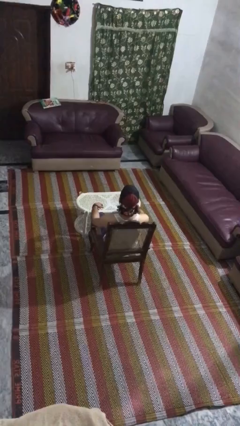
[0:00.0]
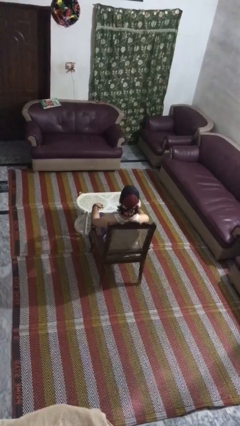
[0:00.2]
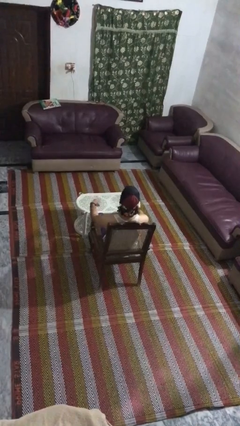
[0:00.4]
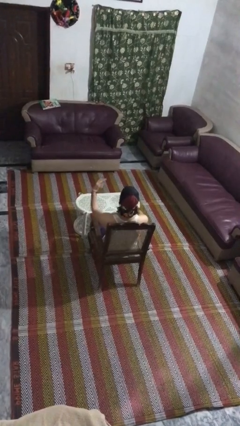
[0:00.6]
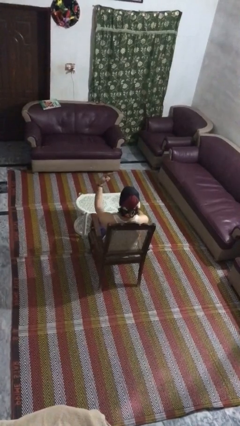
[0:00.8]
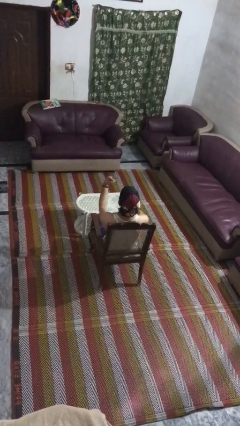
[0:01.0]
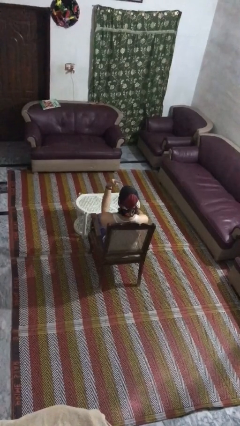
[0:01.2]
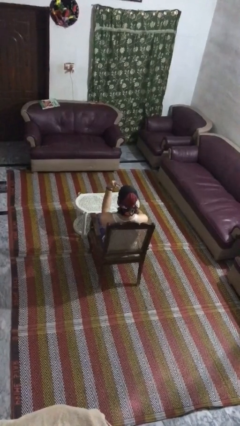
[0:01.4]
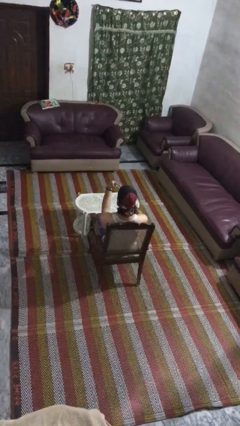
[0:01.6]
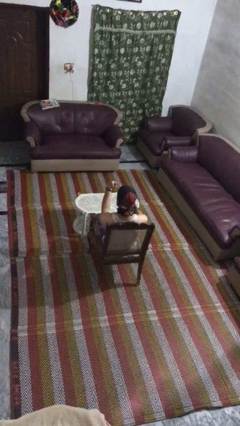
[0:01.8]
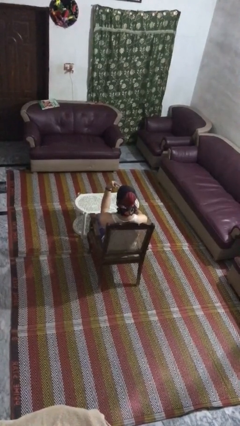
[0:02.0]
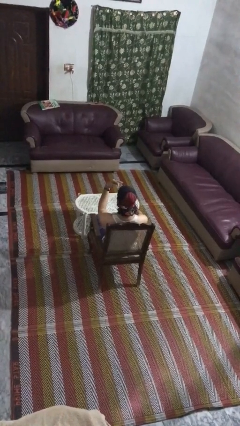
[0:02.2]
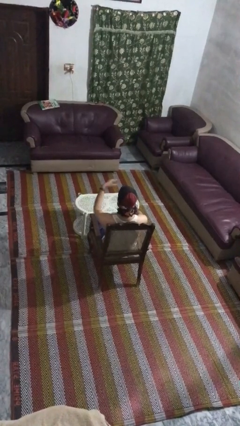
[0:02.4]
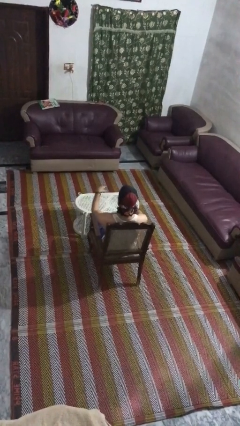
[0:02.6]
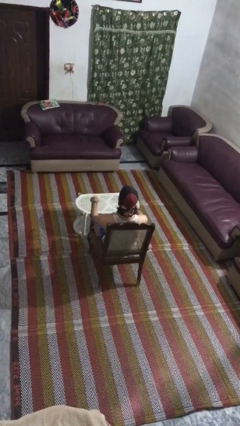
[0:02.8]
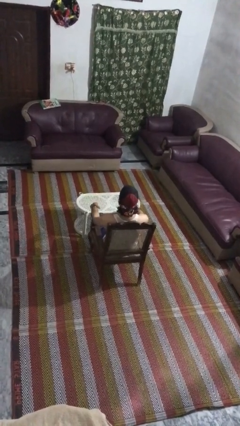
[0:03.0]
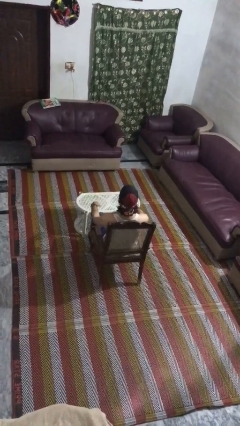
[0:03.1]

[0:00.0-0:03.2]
person gestures watch closely

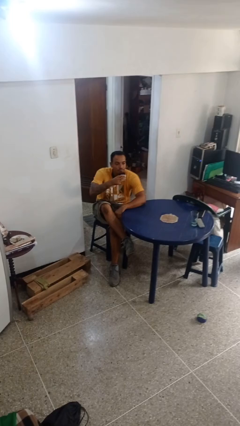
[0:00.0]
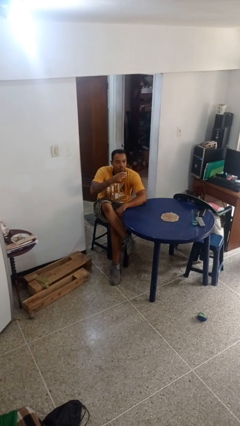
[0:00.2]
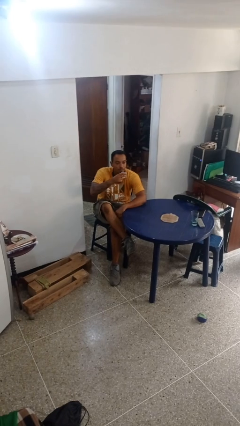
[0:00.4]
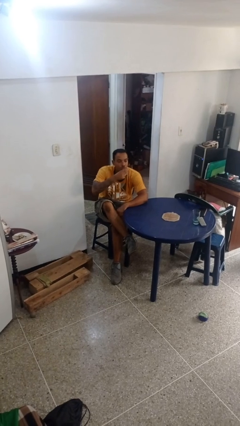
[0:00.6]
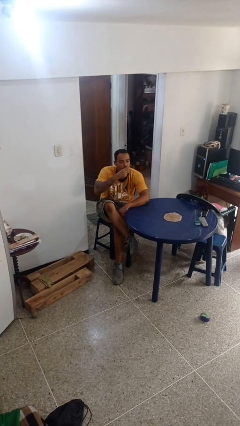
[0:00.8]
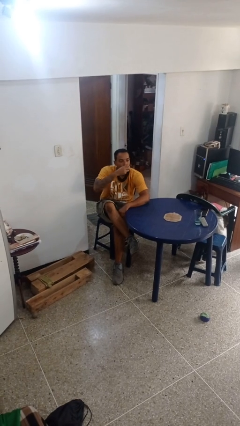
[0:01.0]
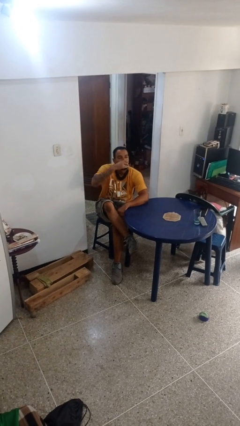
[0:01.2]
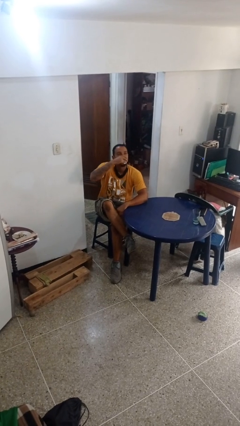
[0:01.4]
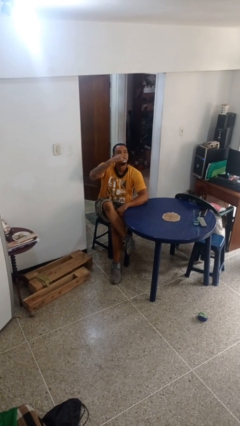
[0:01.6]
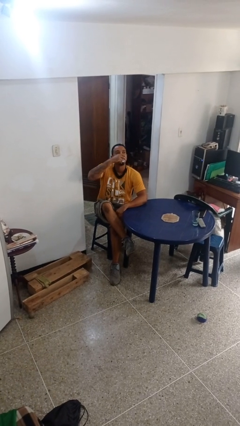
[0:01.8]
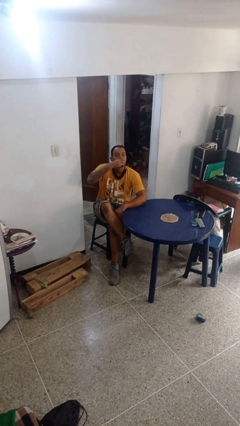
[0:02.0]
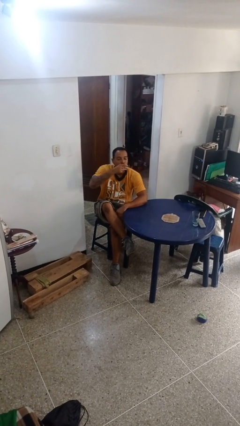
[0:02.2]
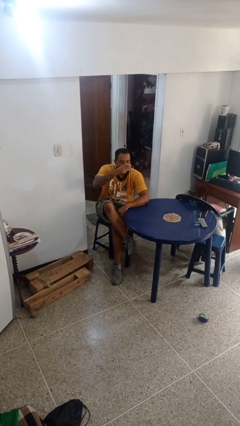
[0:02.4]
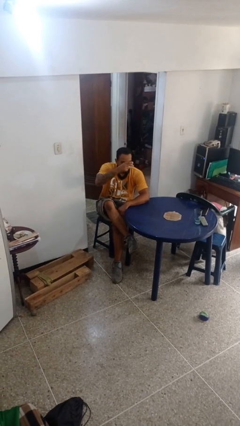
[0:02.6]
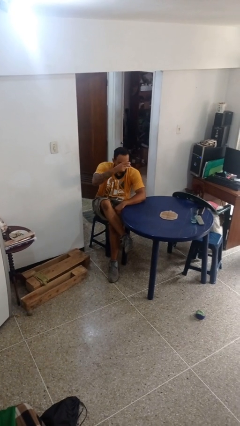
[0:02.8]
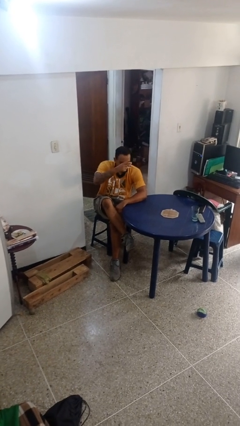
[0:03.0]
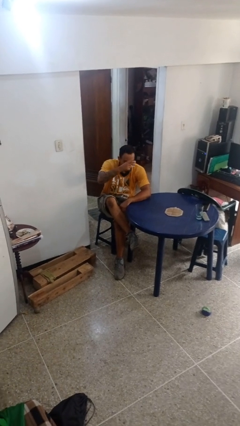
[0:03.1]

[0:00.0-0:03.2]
person drinks from shotglass

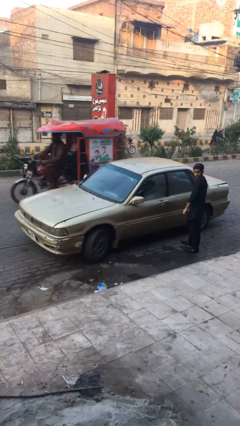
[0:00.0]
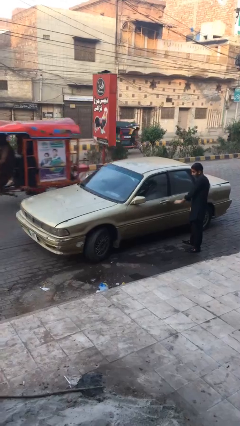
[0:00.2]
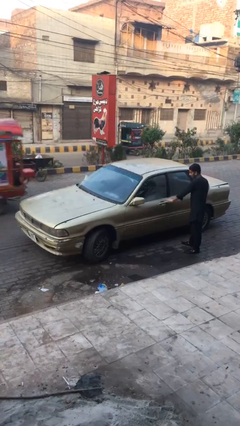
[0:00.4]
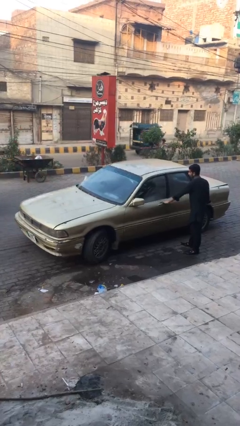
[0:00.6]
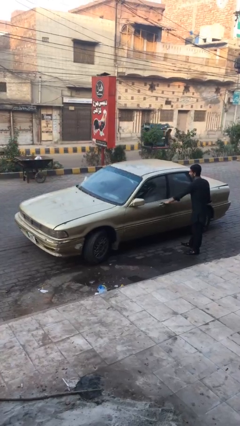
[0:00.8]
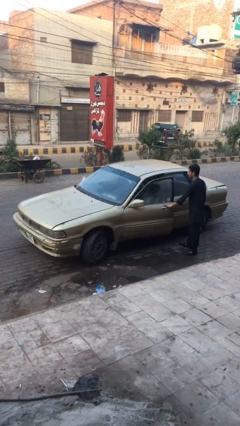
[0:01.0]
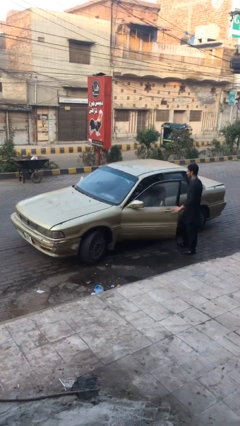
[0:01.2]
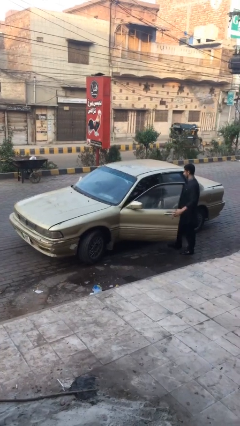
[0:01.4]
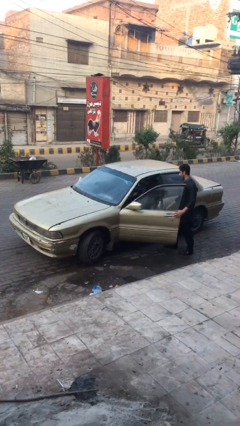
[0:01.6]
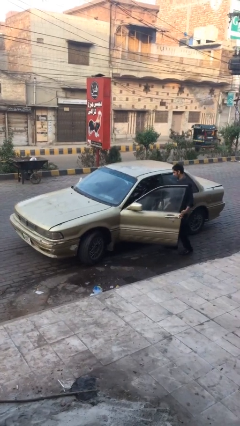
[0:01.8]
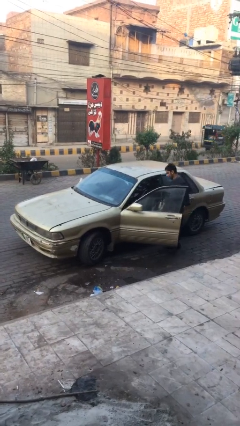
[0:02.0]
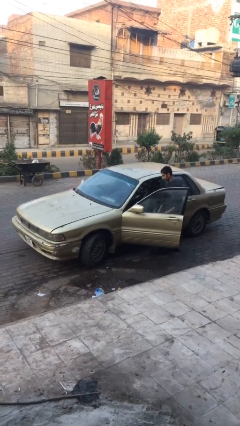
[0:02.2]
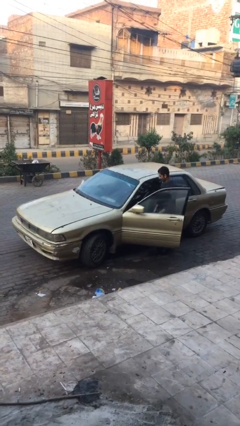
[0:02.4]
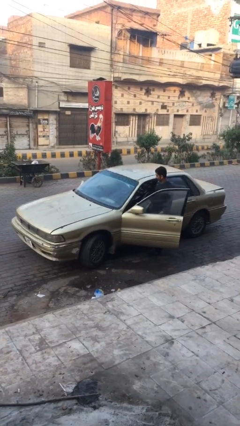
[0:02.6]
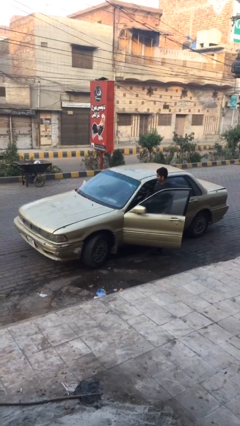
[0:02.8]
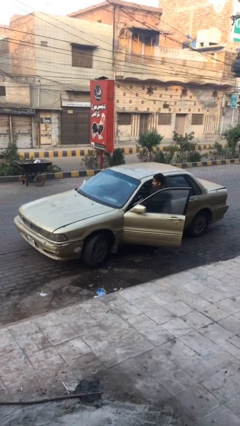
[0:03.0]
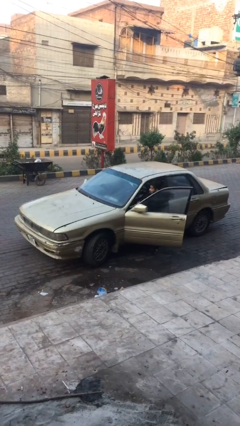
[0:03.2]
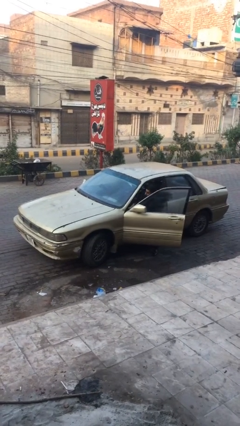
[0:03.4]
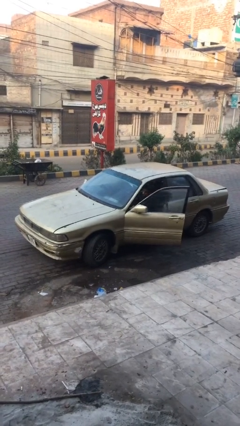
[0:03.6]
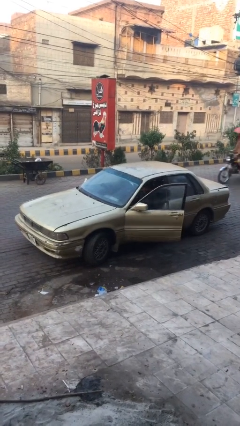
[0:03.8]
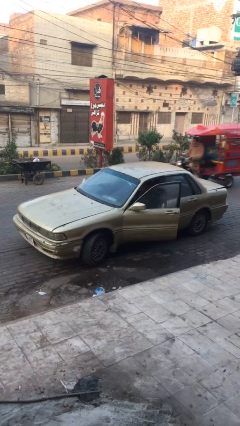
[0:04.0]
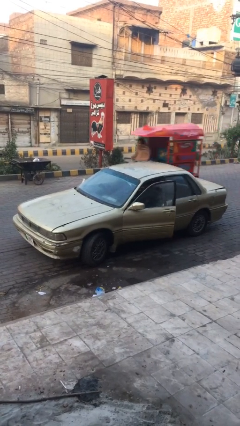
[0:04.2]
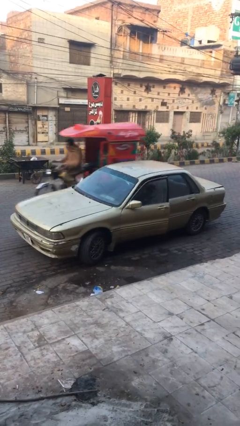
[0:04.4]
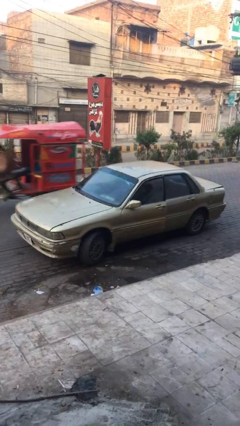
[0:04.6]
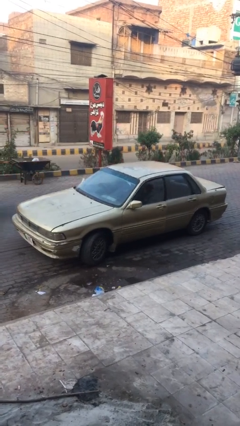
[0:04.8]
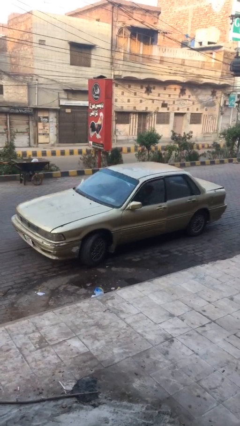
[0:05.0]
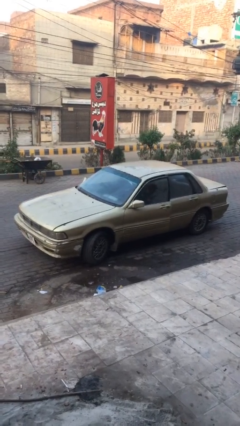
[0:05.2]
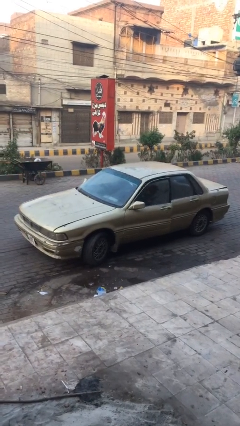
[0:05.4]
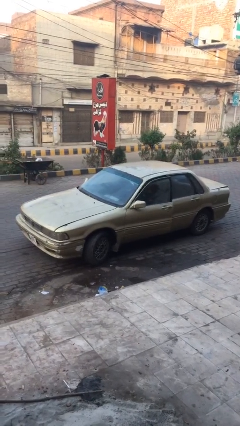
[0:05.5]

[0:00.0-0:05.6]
car picks up person

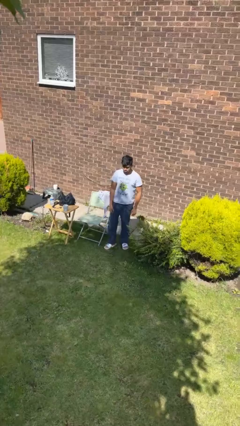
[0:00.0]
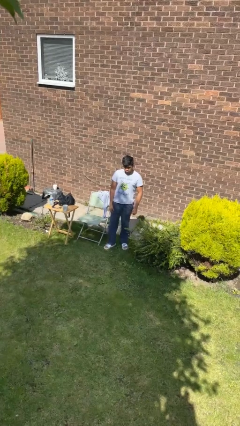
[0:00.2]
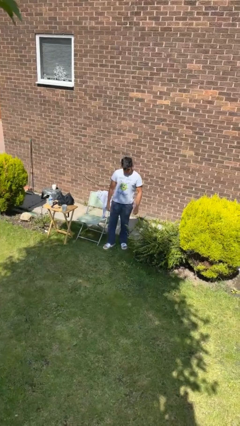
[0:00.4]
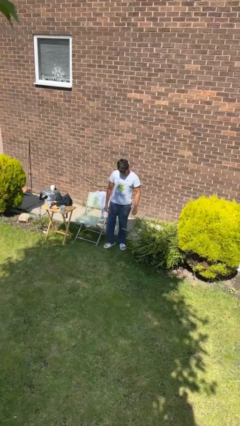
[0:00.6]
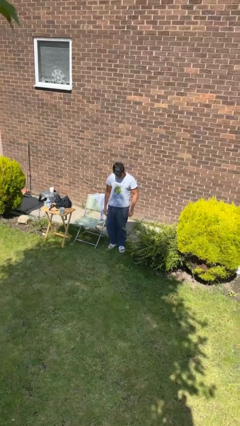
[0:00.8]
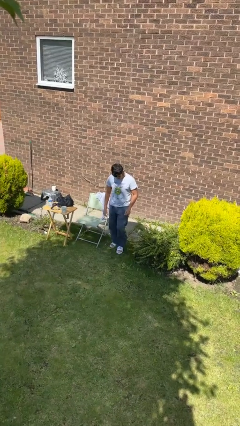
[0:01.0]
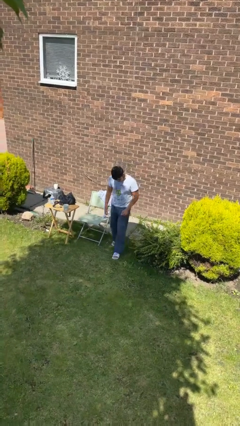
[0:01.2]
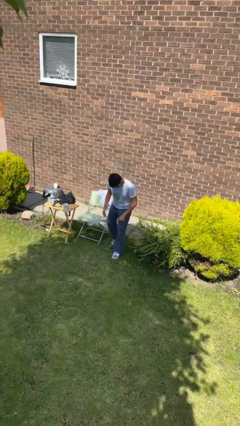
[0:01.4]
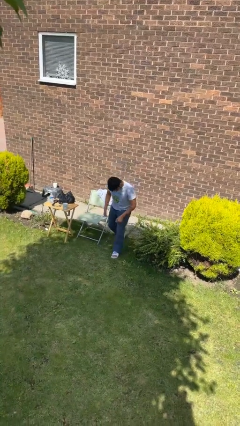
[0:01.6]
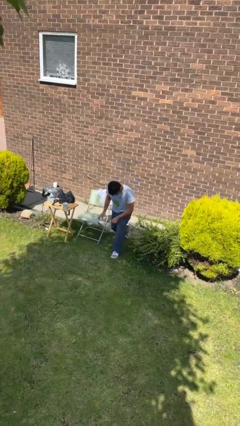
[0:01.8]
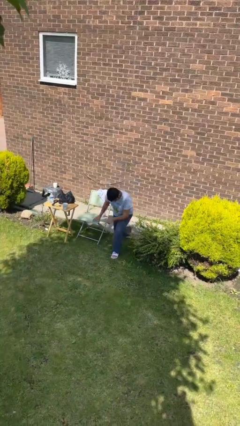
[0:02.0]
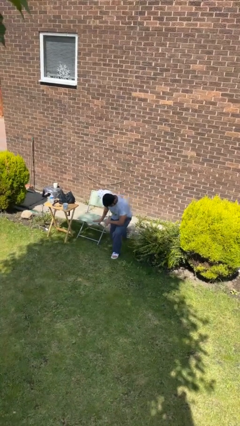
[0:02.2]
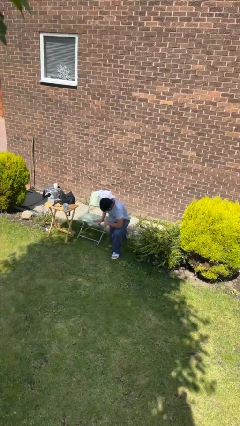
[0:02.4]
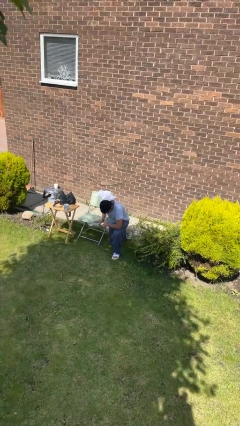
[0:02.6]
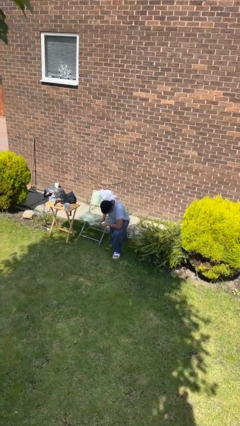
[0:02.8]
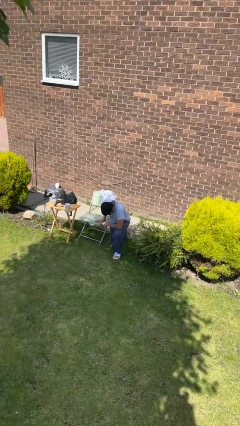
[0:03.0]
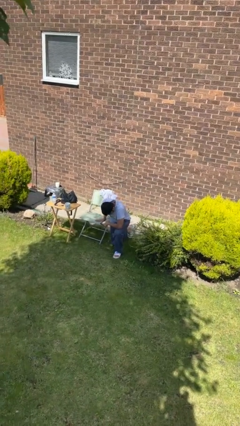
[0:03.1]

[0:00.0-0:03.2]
person kneels

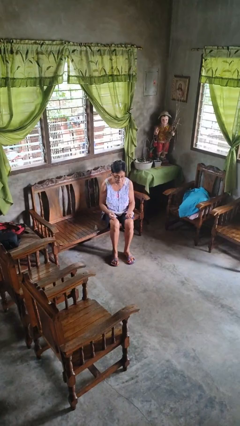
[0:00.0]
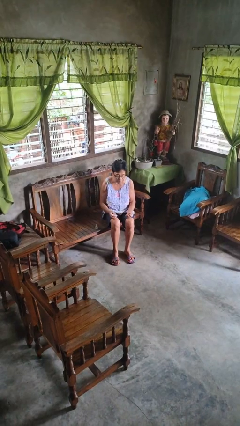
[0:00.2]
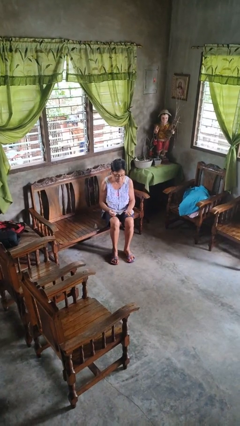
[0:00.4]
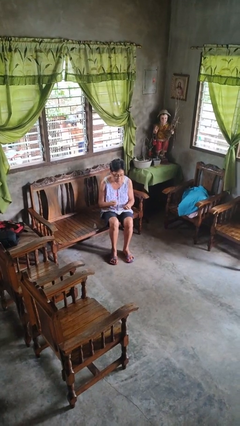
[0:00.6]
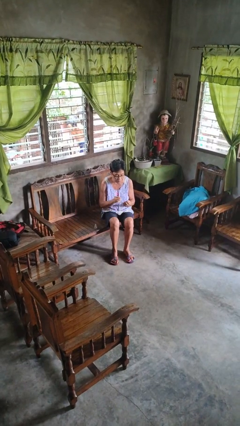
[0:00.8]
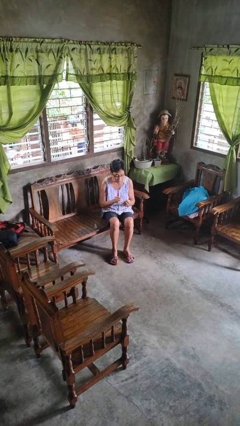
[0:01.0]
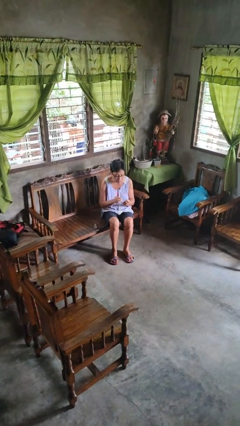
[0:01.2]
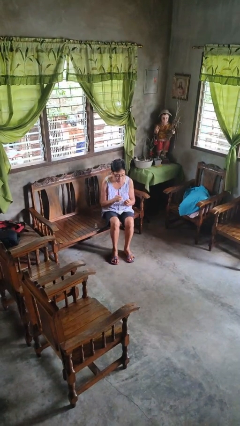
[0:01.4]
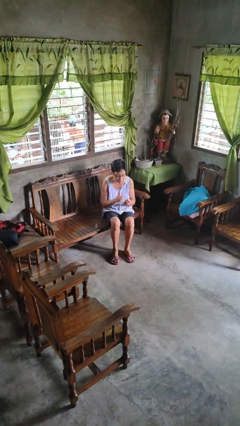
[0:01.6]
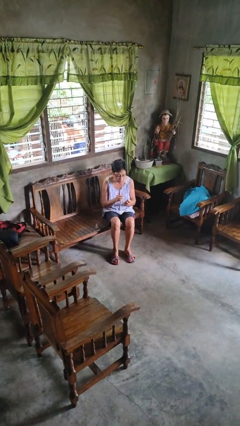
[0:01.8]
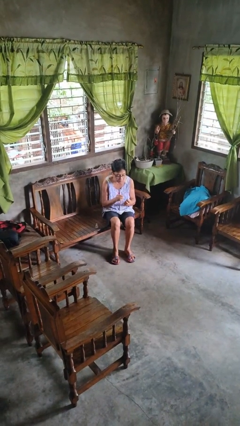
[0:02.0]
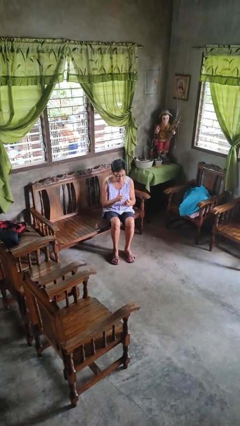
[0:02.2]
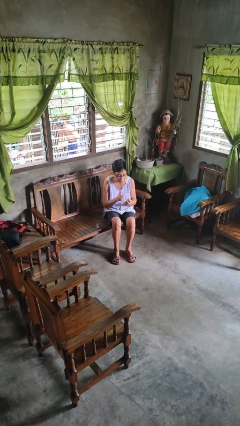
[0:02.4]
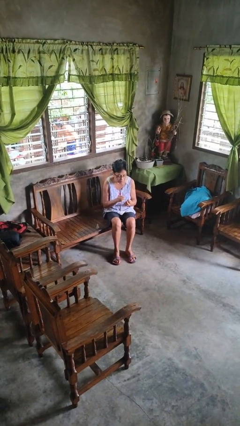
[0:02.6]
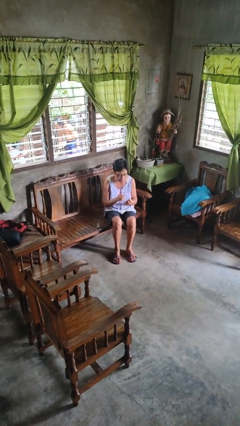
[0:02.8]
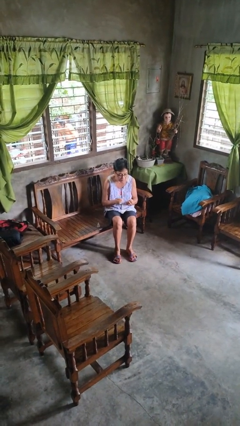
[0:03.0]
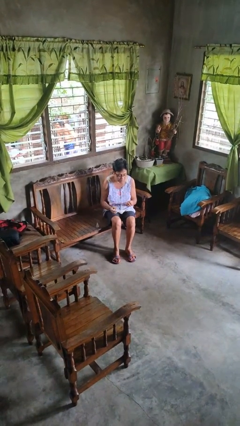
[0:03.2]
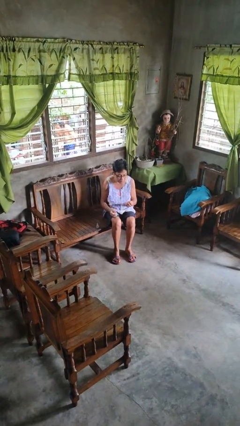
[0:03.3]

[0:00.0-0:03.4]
person paints fingernails
